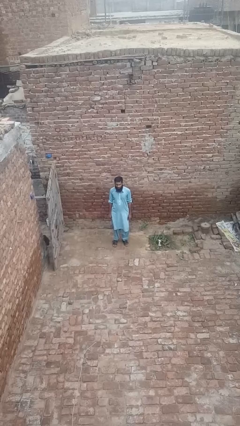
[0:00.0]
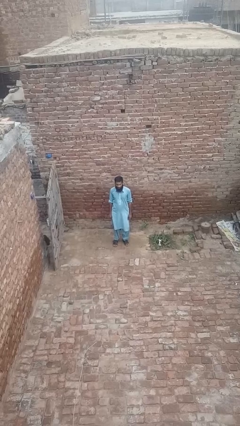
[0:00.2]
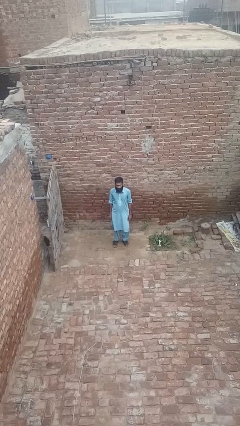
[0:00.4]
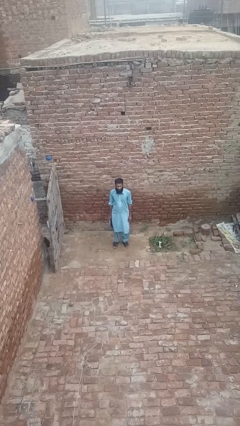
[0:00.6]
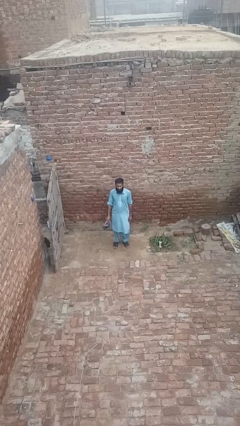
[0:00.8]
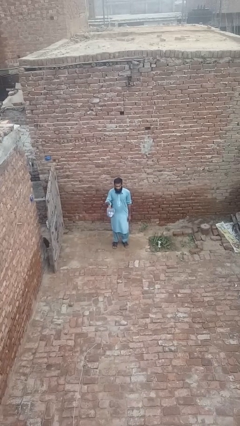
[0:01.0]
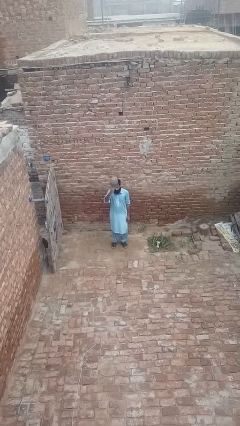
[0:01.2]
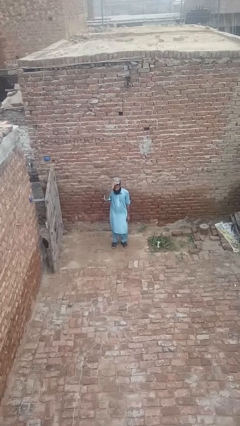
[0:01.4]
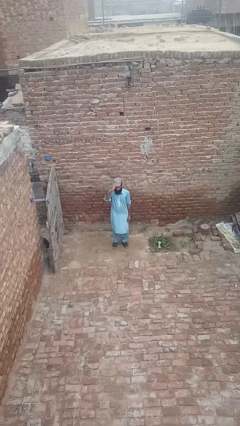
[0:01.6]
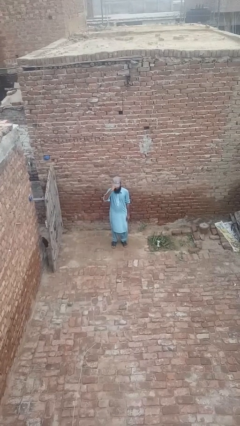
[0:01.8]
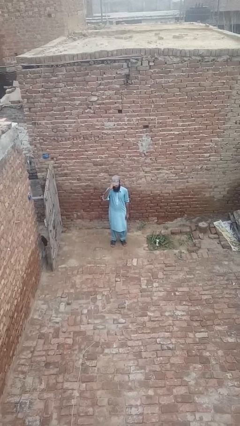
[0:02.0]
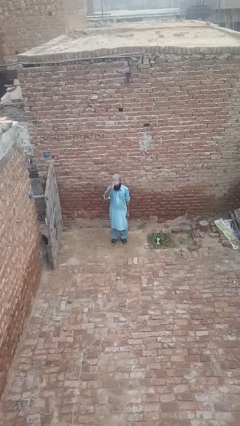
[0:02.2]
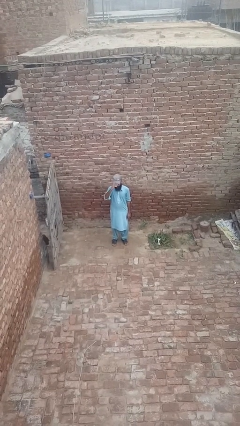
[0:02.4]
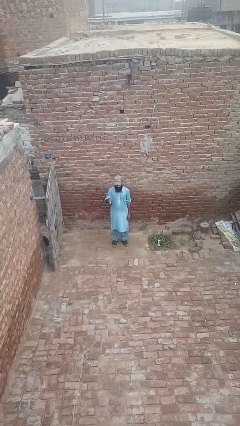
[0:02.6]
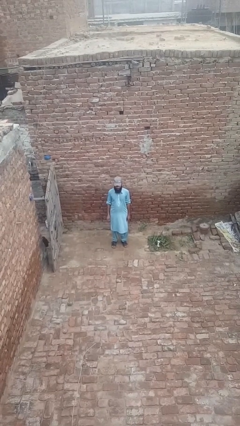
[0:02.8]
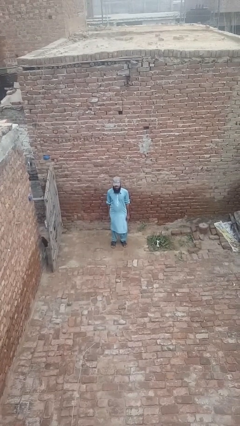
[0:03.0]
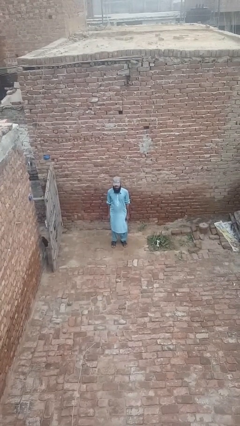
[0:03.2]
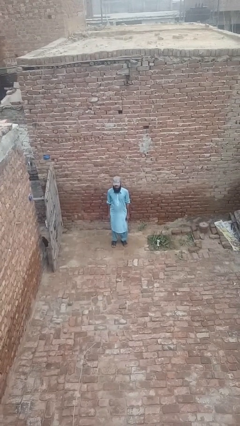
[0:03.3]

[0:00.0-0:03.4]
person puts on hat

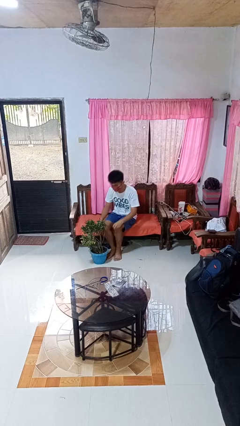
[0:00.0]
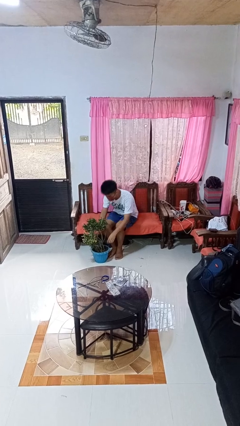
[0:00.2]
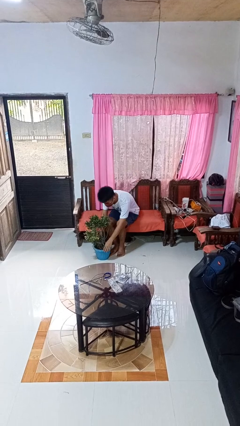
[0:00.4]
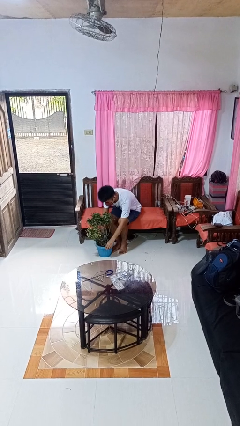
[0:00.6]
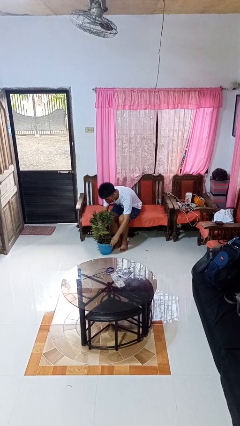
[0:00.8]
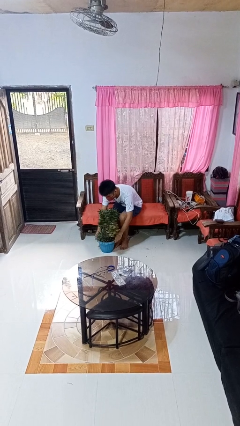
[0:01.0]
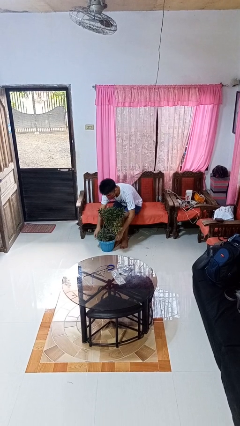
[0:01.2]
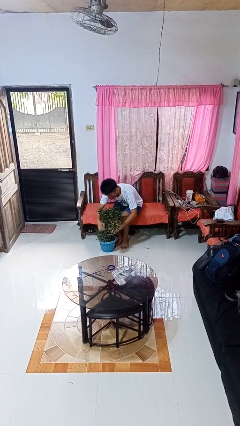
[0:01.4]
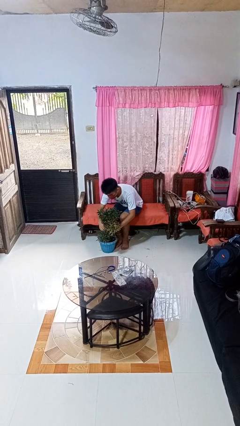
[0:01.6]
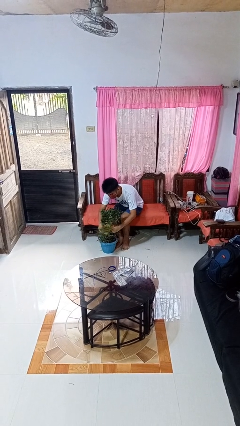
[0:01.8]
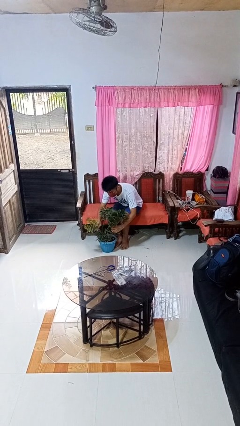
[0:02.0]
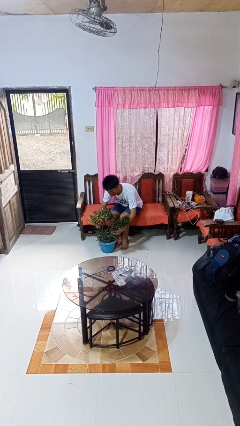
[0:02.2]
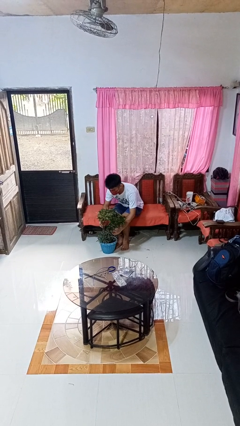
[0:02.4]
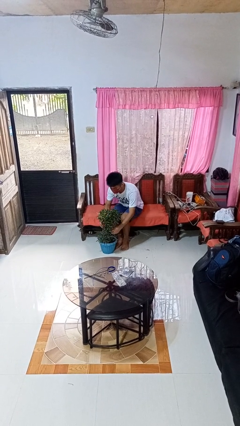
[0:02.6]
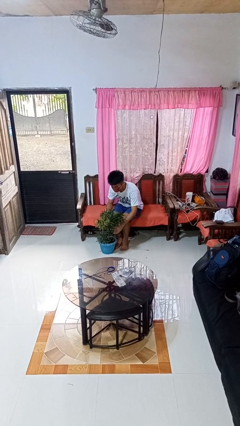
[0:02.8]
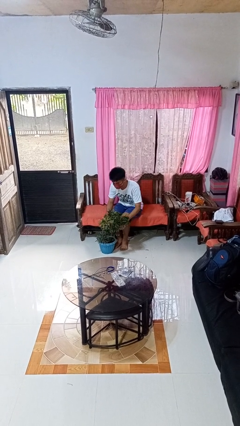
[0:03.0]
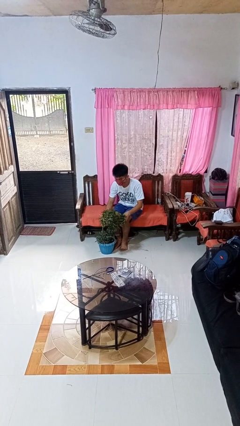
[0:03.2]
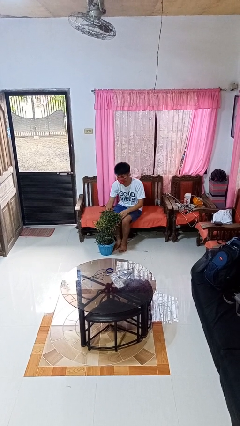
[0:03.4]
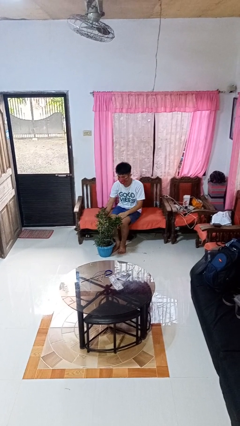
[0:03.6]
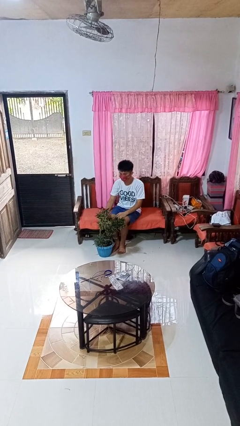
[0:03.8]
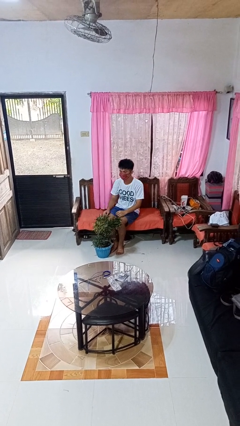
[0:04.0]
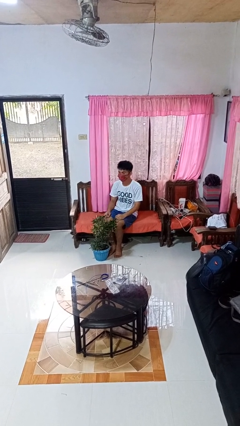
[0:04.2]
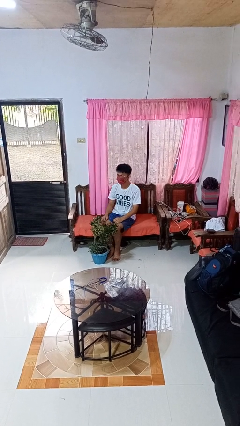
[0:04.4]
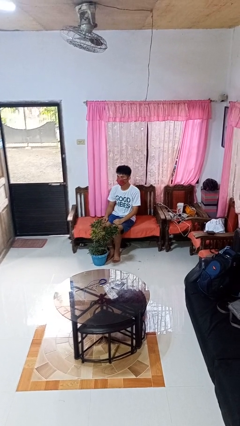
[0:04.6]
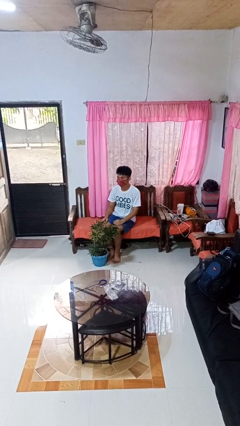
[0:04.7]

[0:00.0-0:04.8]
person arranges flowers in vase

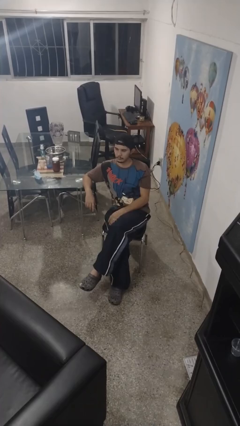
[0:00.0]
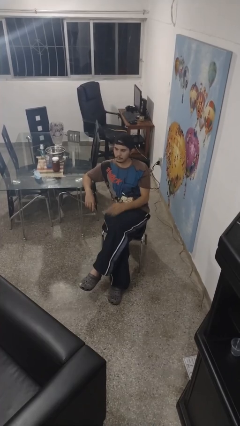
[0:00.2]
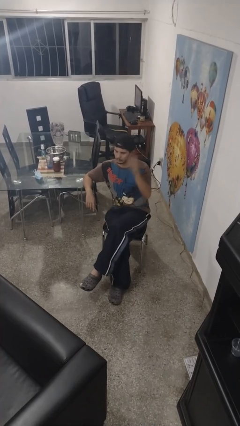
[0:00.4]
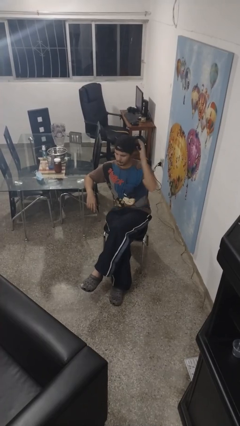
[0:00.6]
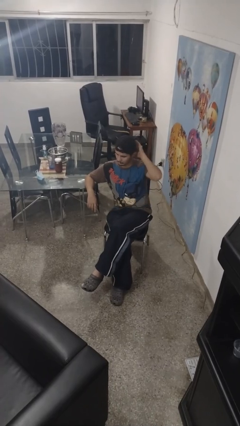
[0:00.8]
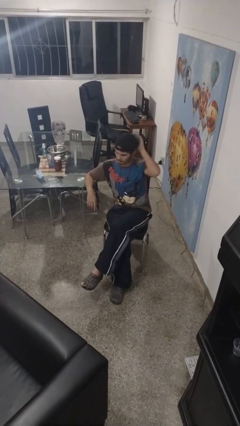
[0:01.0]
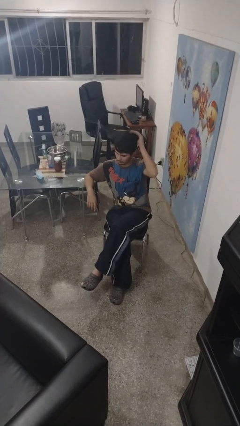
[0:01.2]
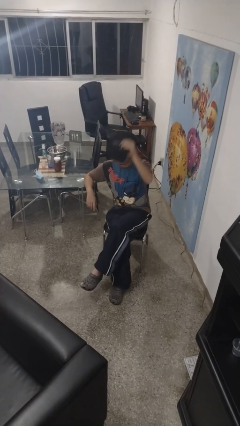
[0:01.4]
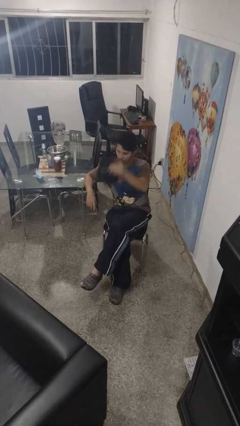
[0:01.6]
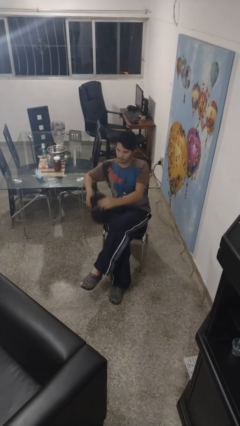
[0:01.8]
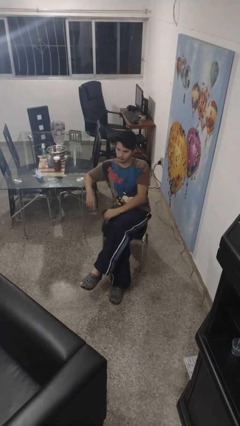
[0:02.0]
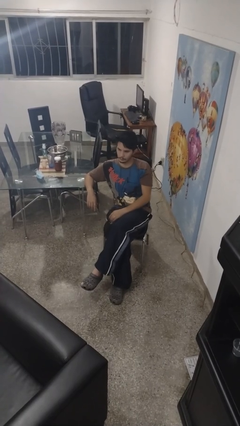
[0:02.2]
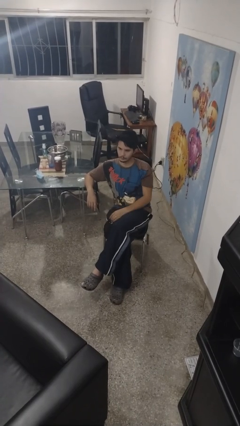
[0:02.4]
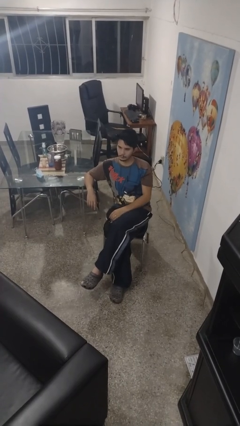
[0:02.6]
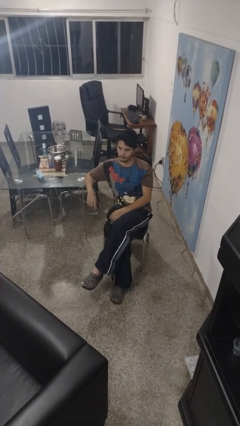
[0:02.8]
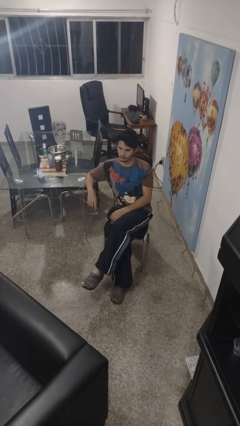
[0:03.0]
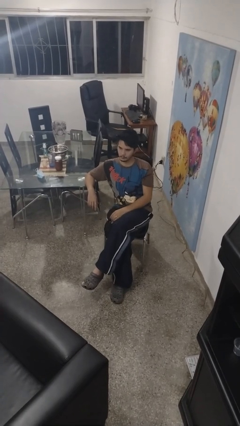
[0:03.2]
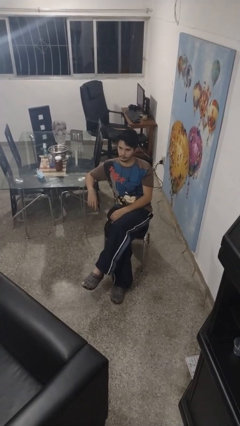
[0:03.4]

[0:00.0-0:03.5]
person takes off hat

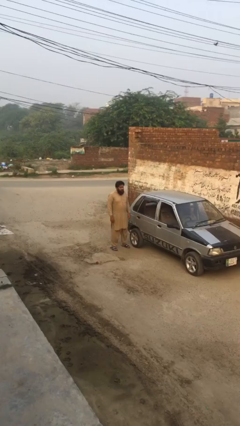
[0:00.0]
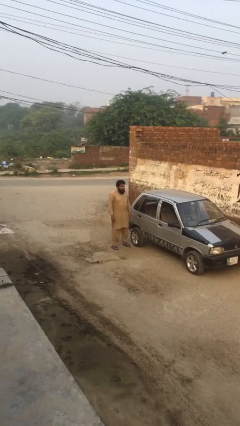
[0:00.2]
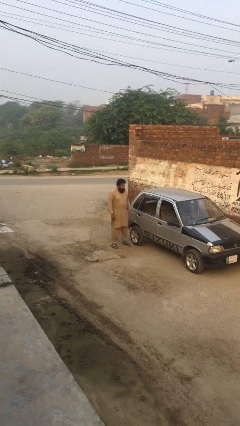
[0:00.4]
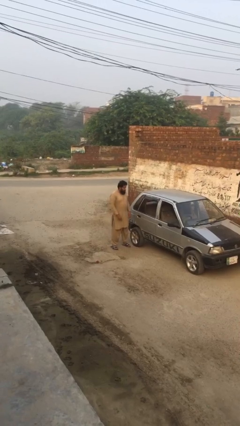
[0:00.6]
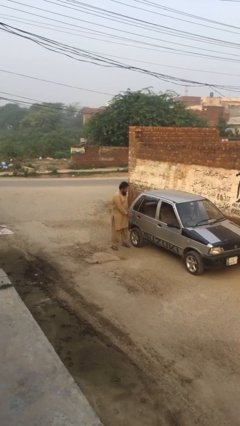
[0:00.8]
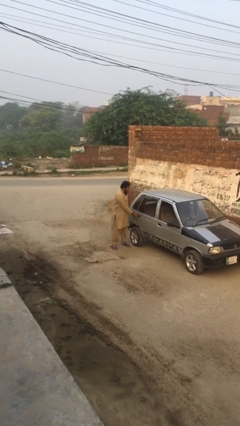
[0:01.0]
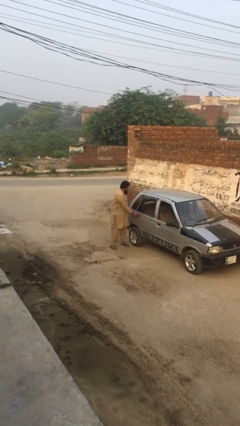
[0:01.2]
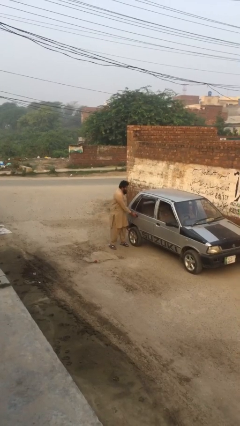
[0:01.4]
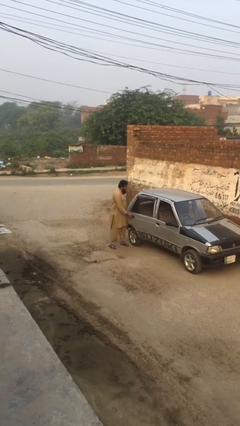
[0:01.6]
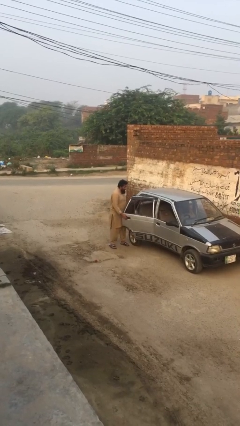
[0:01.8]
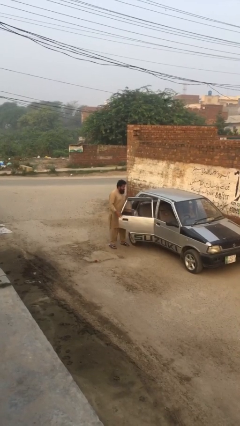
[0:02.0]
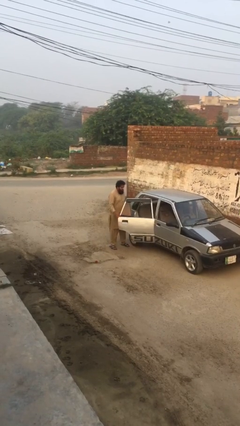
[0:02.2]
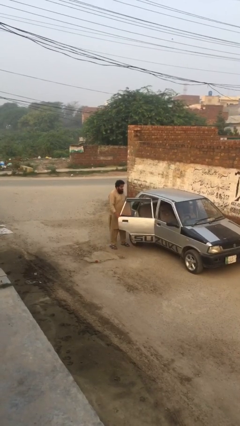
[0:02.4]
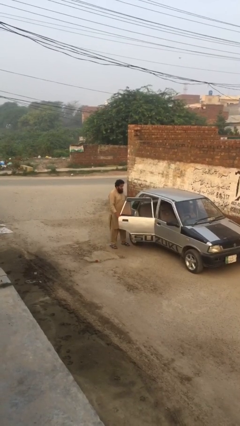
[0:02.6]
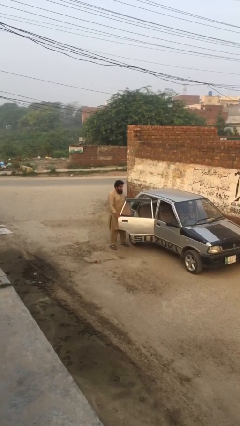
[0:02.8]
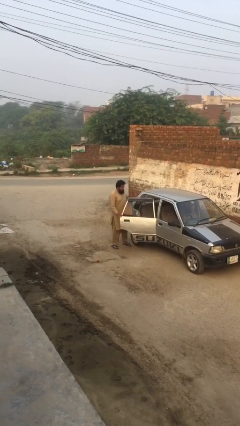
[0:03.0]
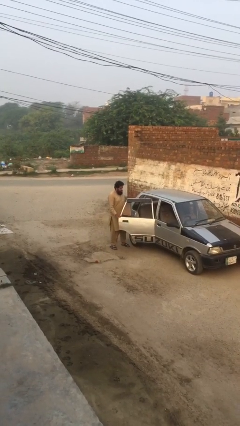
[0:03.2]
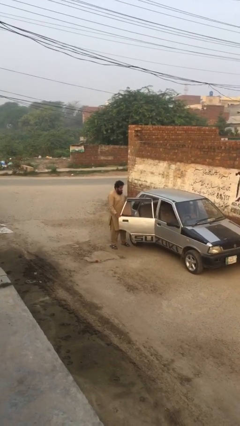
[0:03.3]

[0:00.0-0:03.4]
person opens car door

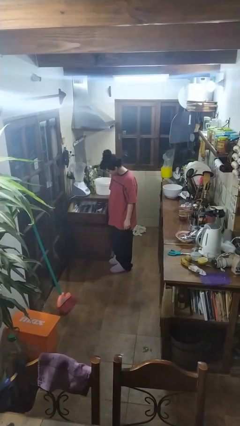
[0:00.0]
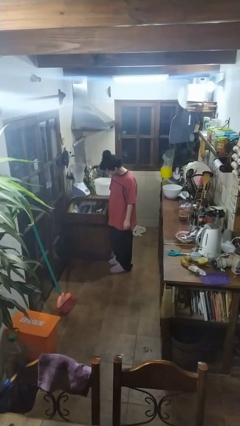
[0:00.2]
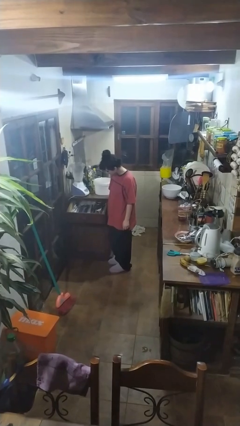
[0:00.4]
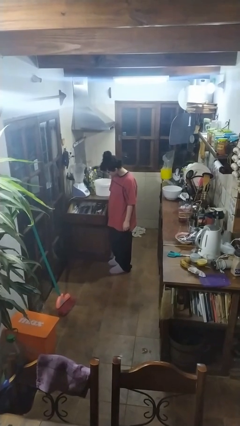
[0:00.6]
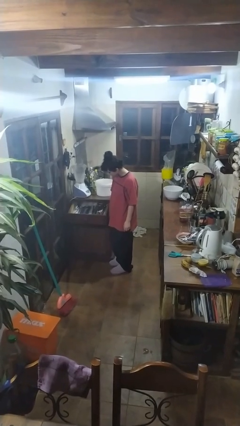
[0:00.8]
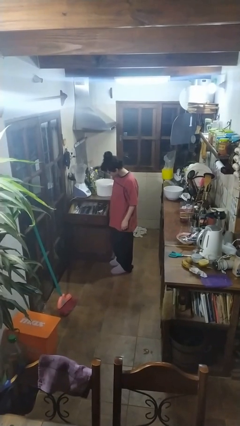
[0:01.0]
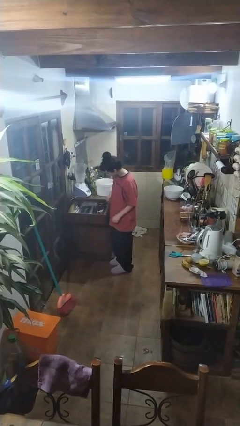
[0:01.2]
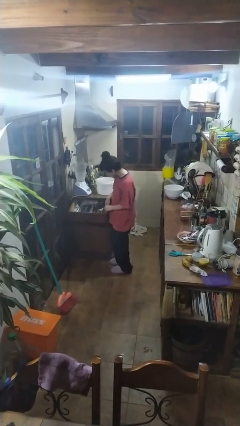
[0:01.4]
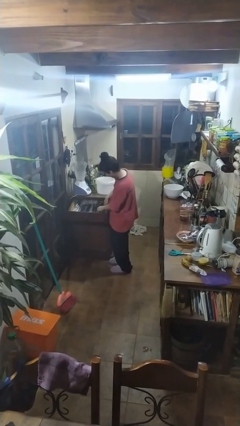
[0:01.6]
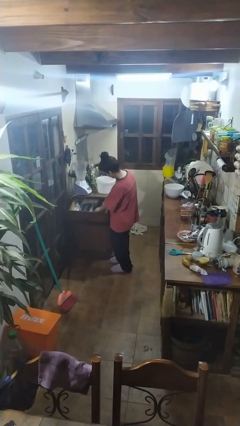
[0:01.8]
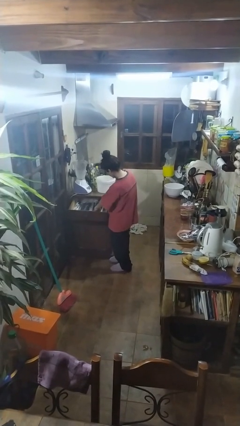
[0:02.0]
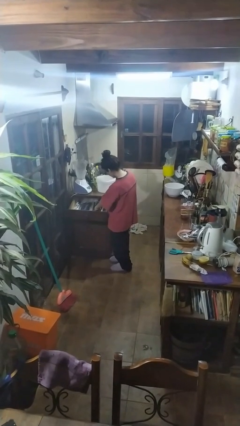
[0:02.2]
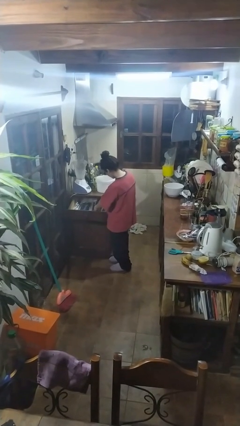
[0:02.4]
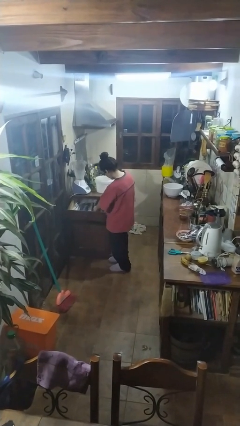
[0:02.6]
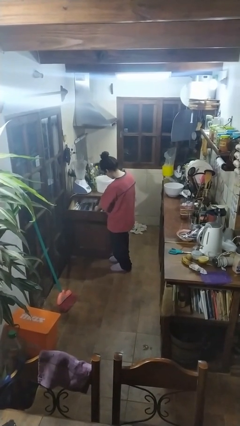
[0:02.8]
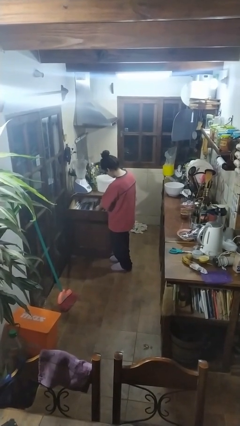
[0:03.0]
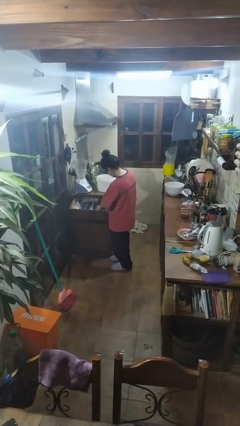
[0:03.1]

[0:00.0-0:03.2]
person searches in kitchen drawer
